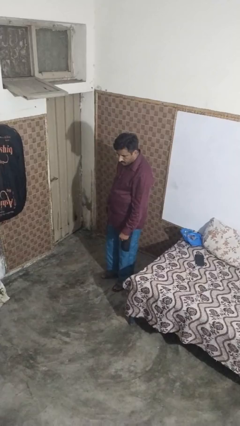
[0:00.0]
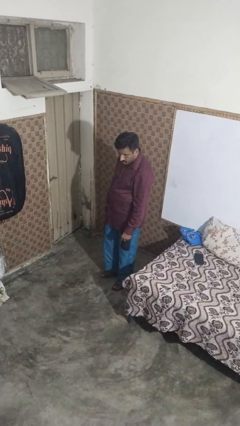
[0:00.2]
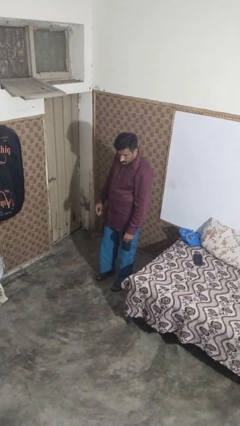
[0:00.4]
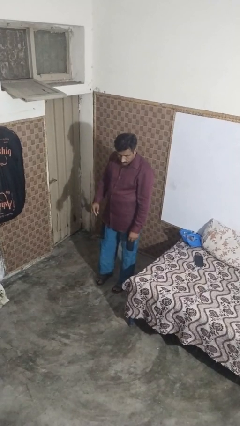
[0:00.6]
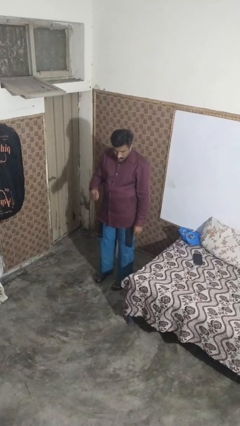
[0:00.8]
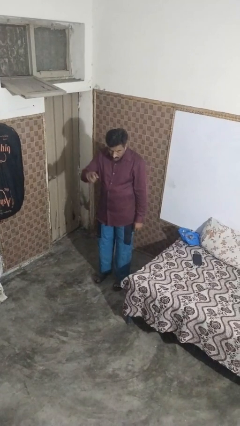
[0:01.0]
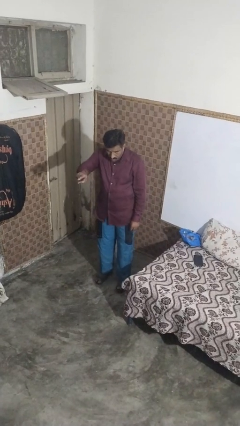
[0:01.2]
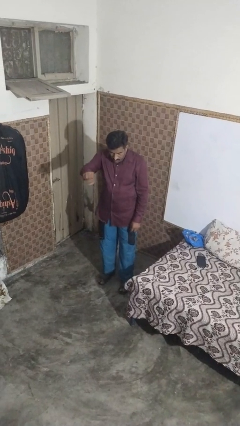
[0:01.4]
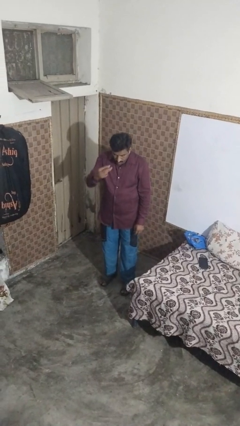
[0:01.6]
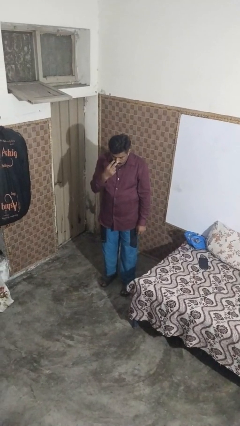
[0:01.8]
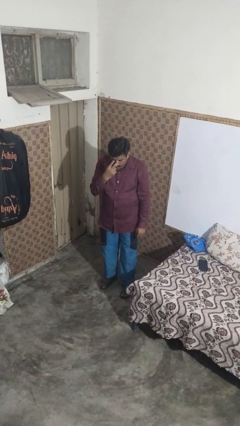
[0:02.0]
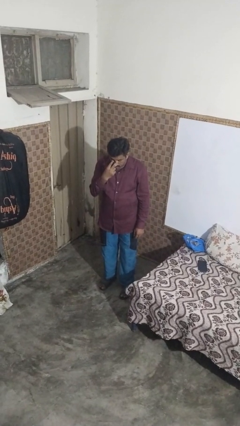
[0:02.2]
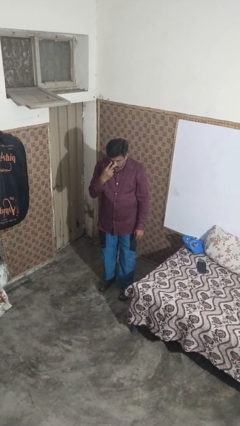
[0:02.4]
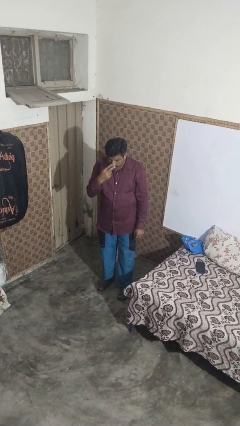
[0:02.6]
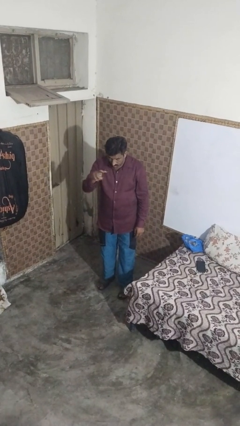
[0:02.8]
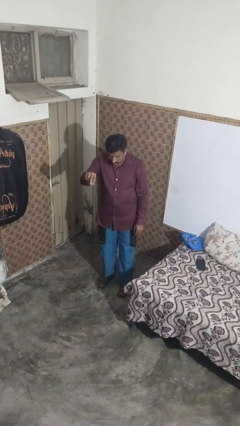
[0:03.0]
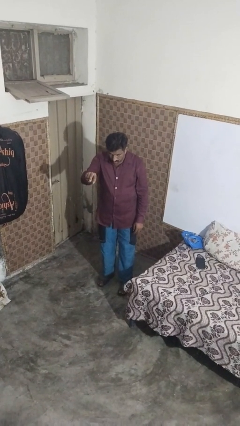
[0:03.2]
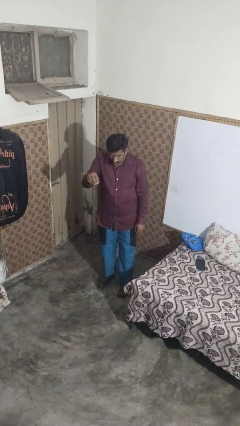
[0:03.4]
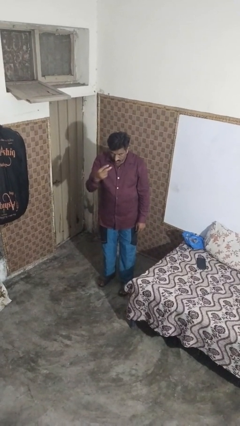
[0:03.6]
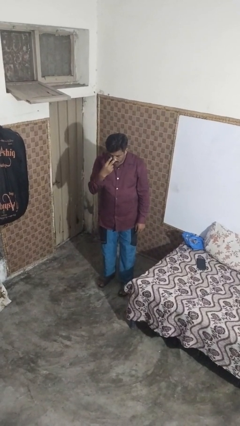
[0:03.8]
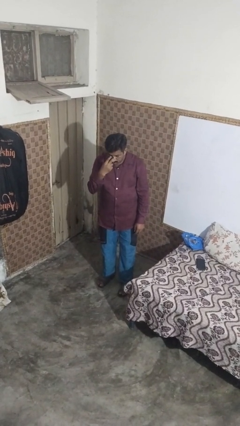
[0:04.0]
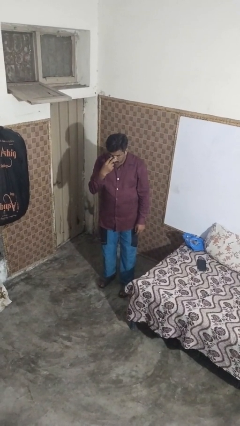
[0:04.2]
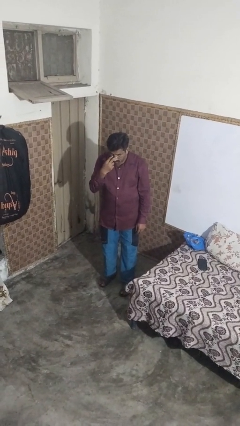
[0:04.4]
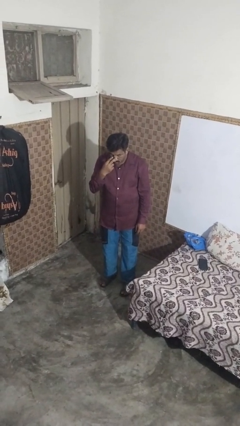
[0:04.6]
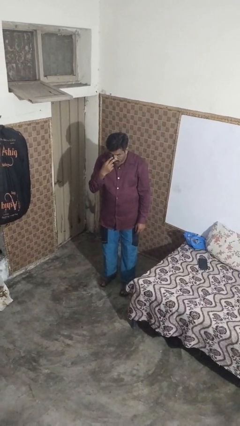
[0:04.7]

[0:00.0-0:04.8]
person gestures watch closely

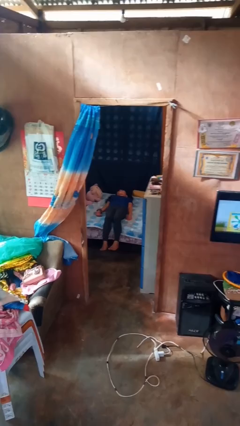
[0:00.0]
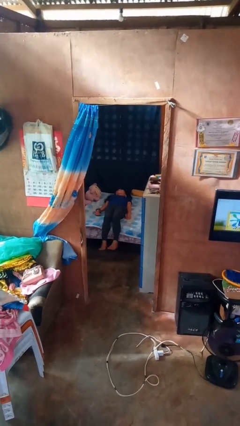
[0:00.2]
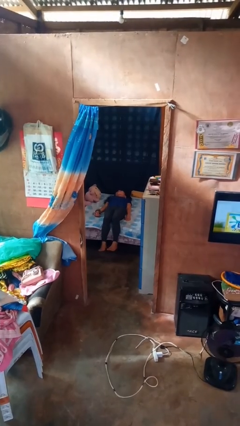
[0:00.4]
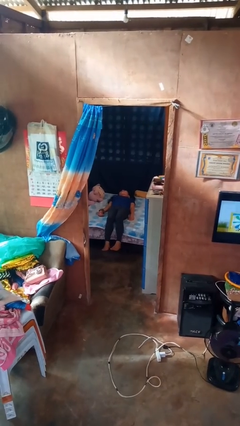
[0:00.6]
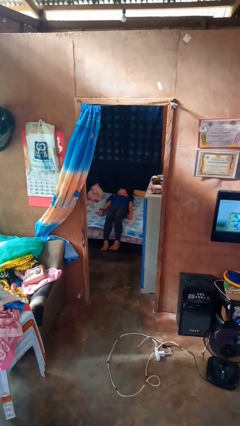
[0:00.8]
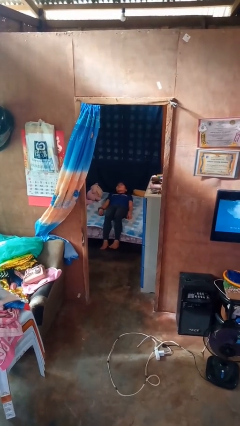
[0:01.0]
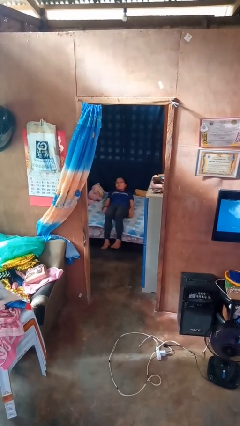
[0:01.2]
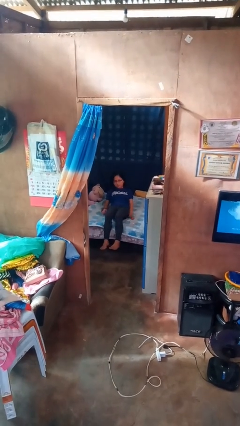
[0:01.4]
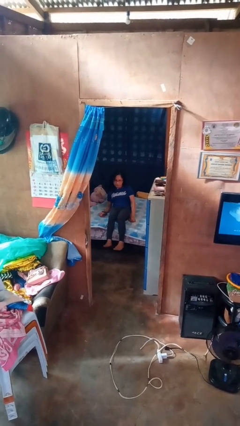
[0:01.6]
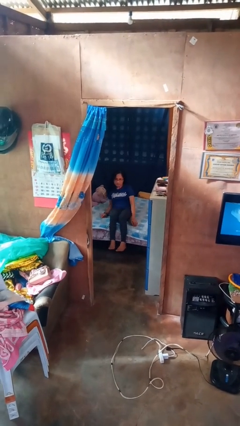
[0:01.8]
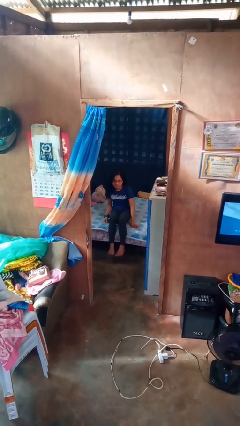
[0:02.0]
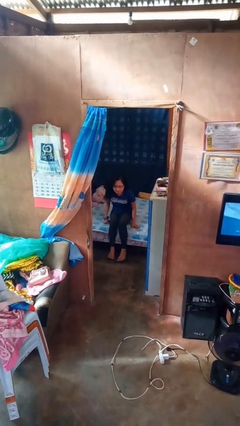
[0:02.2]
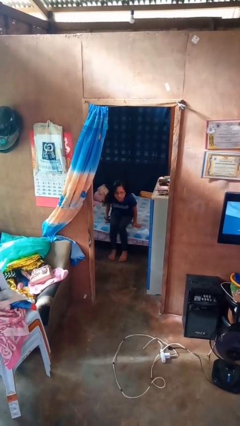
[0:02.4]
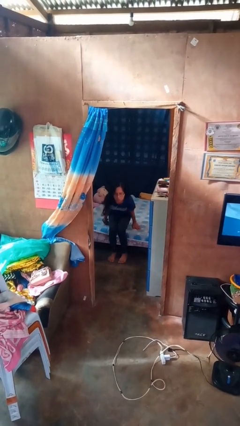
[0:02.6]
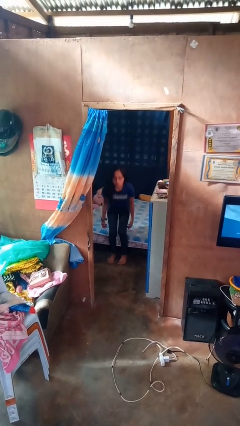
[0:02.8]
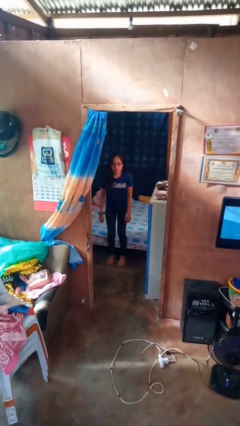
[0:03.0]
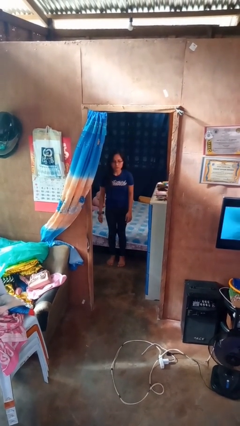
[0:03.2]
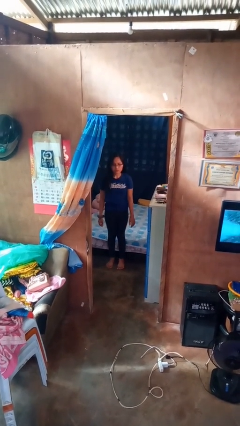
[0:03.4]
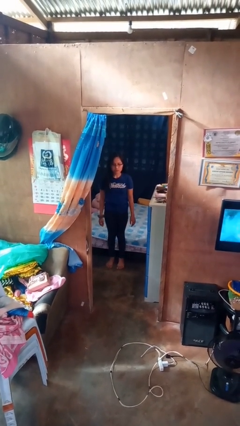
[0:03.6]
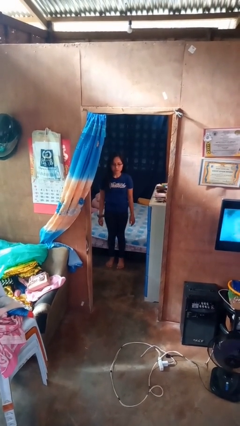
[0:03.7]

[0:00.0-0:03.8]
person stands up

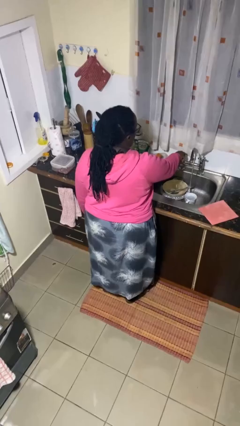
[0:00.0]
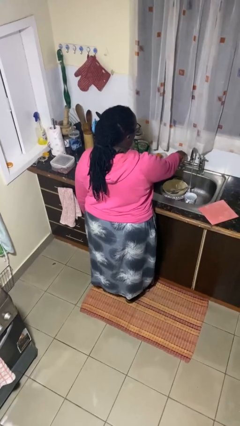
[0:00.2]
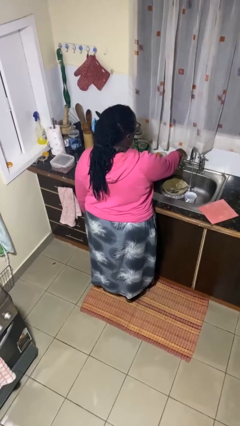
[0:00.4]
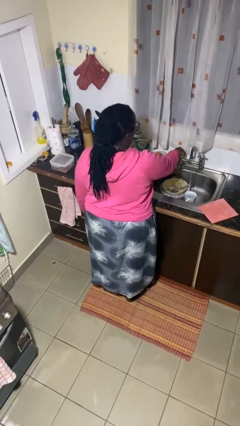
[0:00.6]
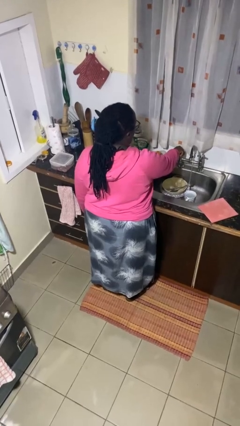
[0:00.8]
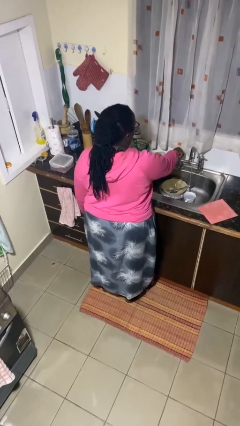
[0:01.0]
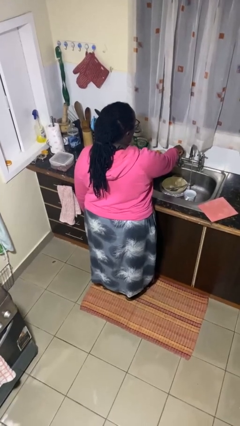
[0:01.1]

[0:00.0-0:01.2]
person turns off faucet

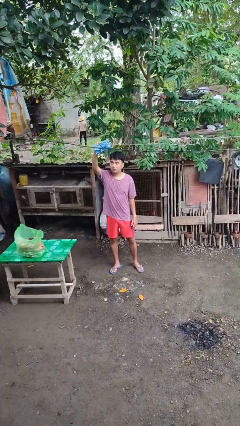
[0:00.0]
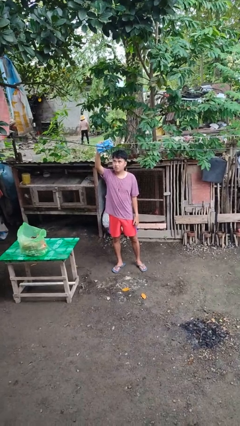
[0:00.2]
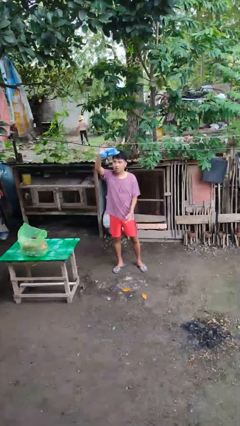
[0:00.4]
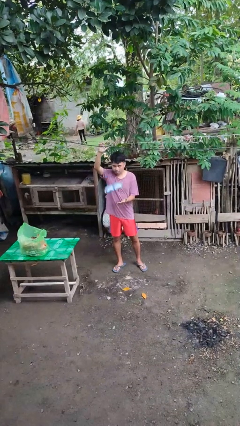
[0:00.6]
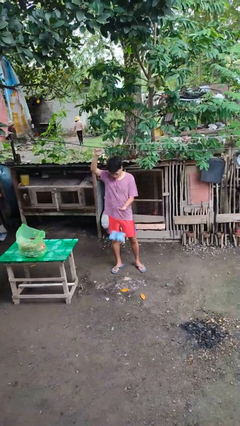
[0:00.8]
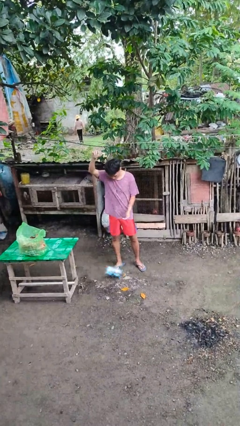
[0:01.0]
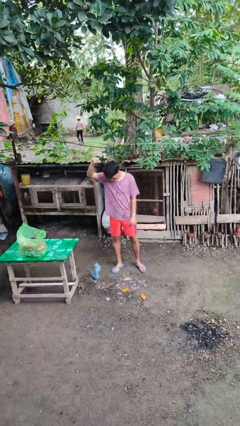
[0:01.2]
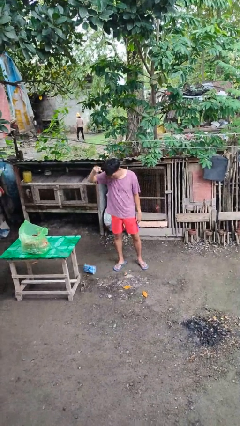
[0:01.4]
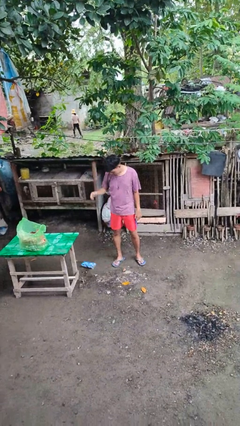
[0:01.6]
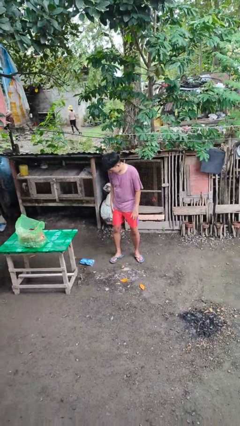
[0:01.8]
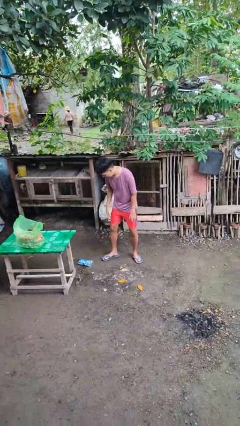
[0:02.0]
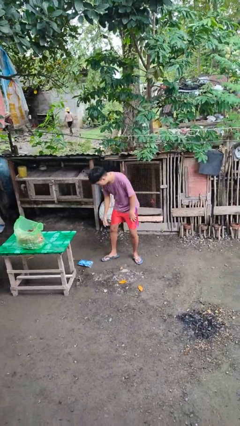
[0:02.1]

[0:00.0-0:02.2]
person drops object

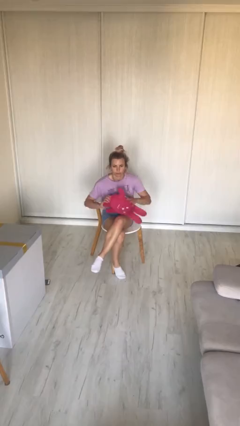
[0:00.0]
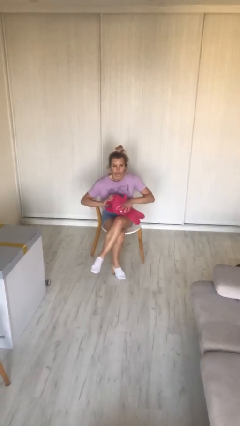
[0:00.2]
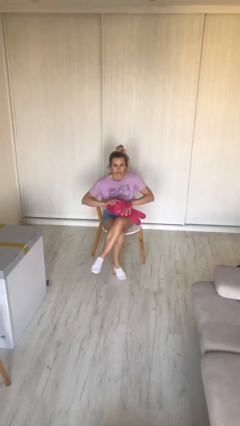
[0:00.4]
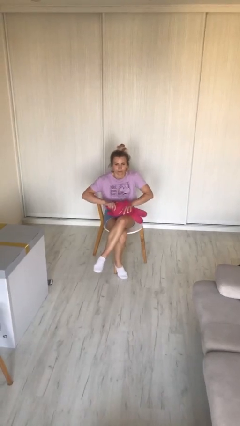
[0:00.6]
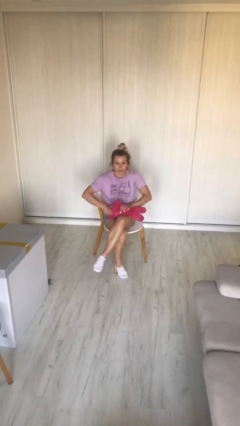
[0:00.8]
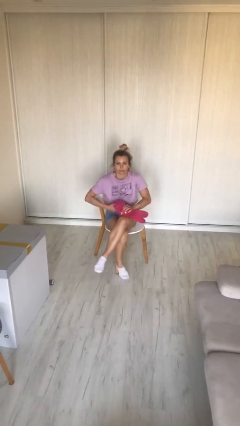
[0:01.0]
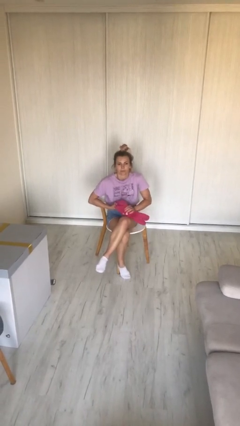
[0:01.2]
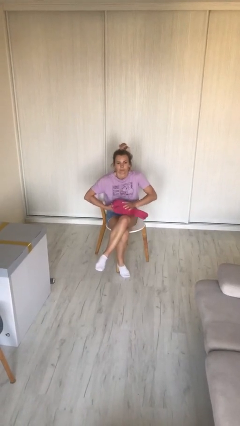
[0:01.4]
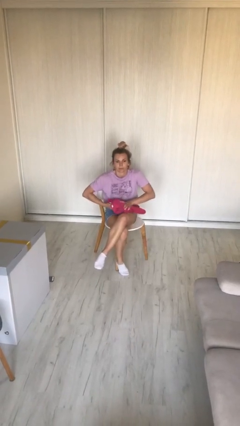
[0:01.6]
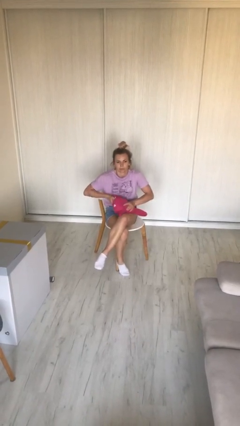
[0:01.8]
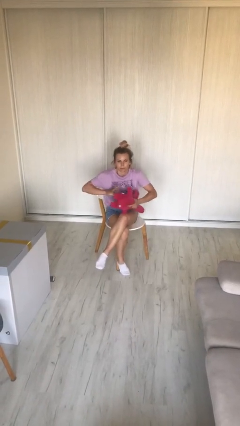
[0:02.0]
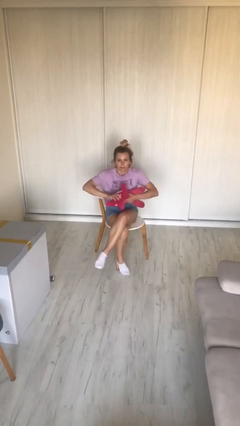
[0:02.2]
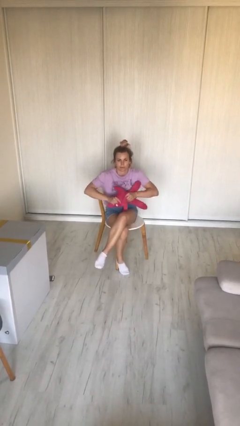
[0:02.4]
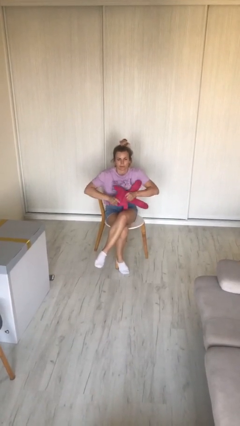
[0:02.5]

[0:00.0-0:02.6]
person squeezes object

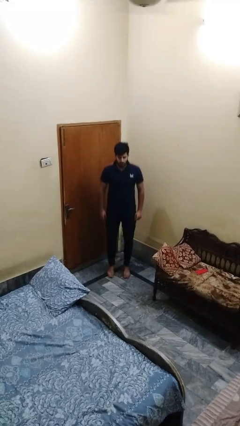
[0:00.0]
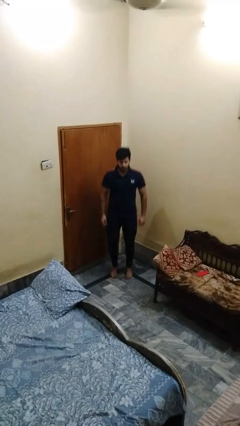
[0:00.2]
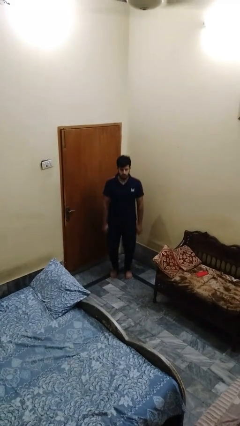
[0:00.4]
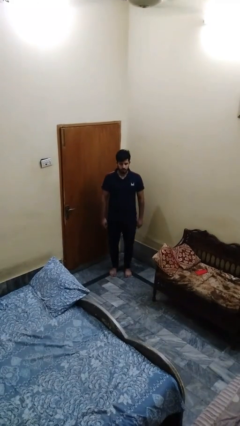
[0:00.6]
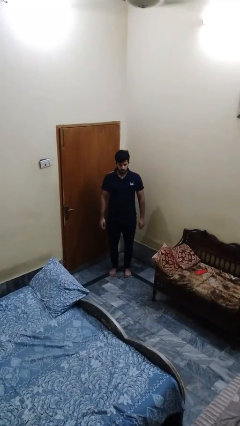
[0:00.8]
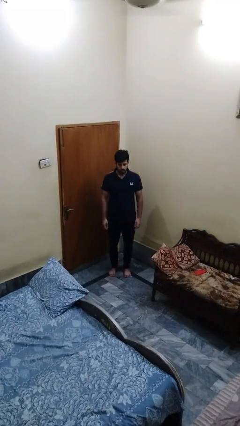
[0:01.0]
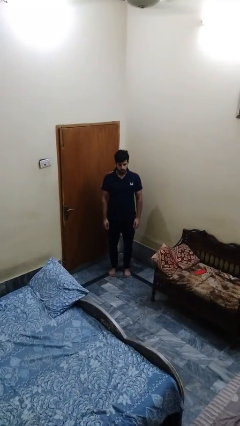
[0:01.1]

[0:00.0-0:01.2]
person jumps

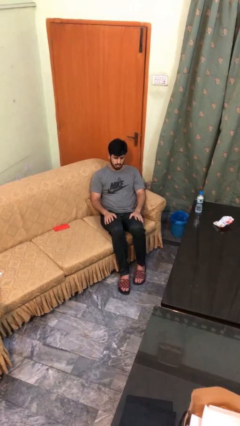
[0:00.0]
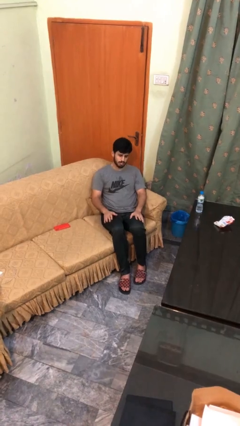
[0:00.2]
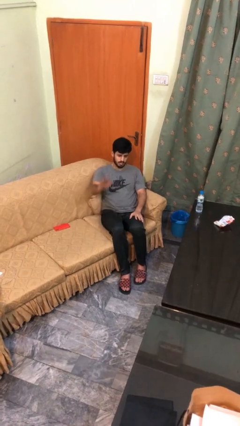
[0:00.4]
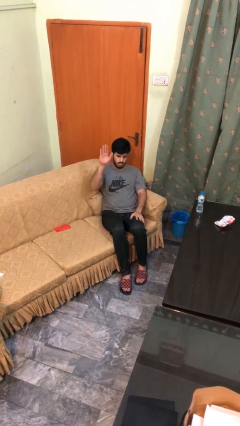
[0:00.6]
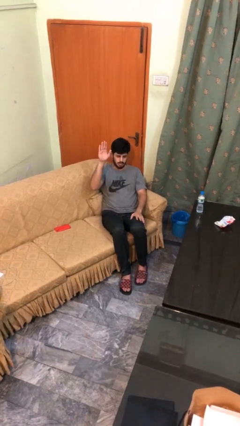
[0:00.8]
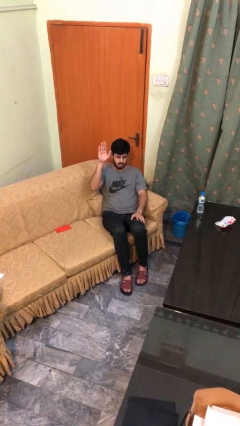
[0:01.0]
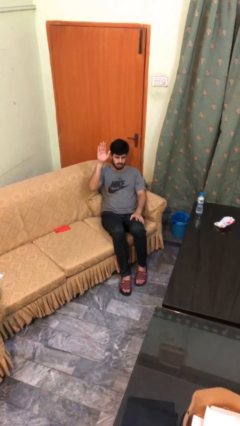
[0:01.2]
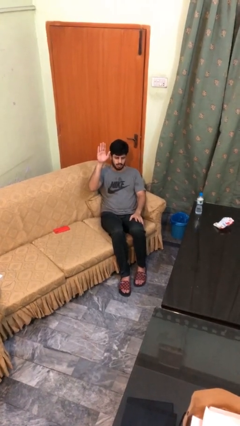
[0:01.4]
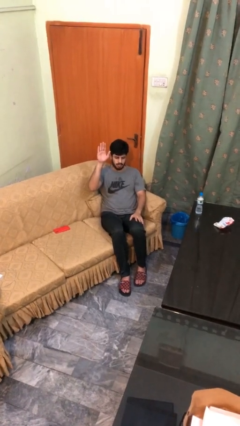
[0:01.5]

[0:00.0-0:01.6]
person gestures raise hand

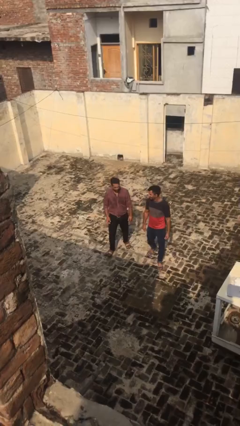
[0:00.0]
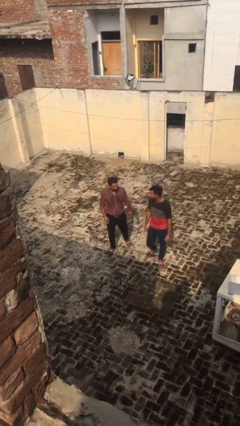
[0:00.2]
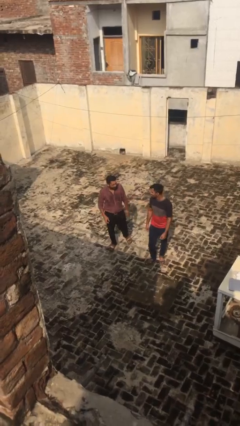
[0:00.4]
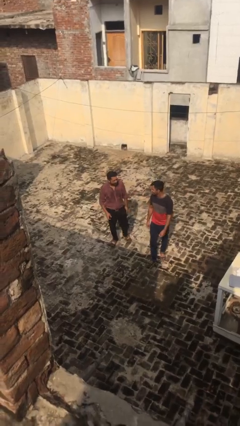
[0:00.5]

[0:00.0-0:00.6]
person talks to person
